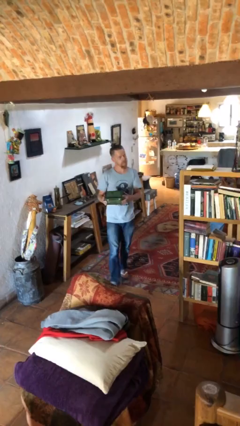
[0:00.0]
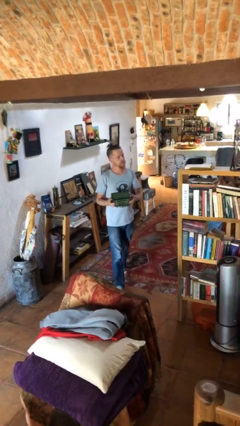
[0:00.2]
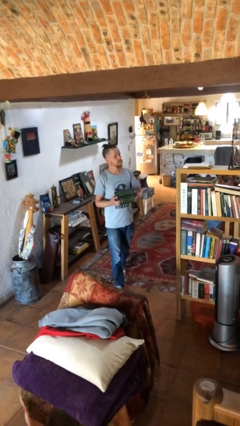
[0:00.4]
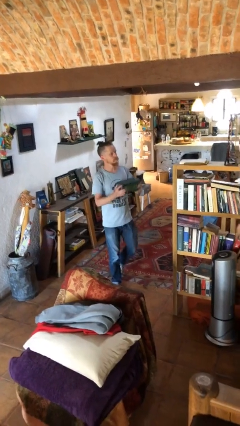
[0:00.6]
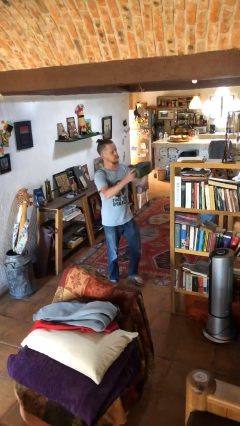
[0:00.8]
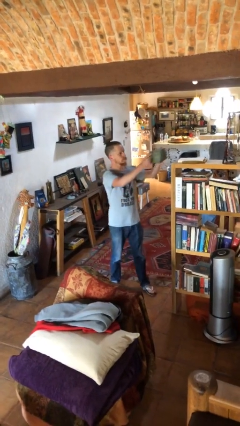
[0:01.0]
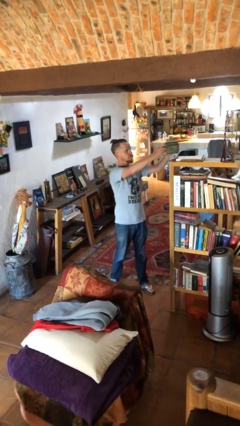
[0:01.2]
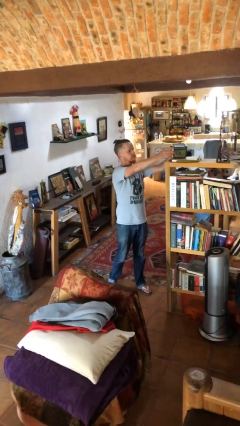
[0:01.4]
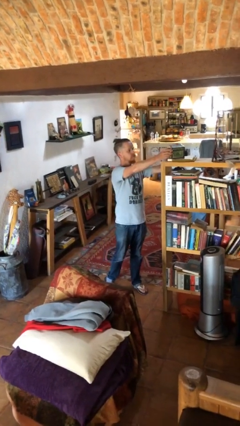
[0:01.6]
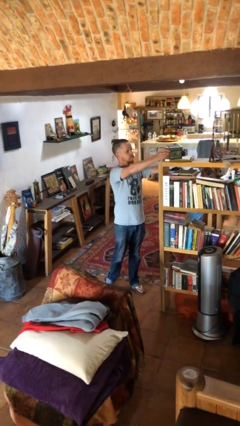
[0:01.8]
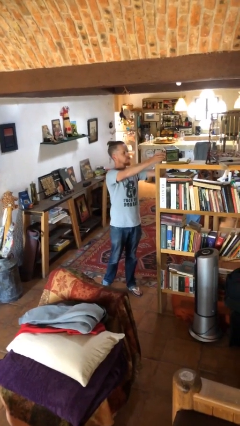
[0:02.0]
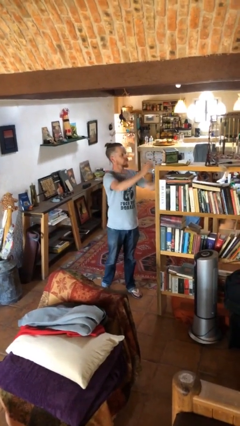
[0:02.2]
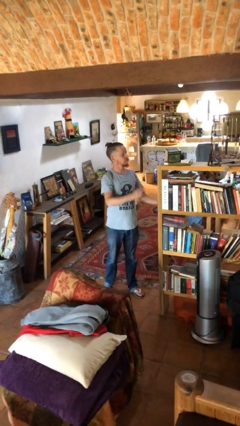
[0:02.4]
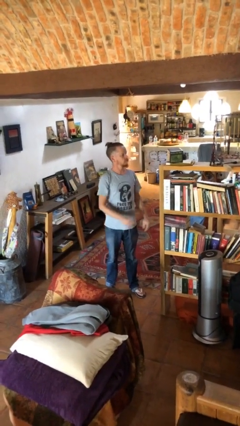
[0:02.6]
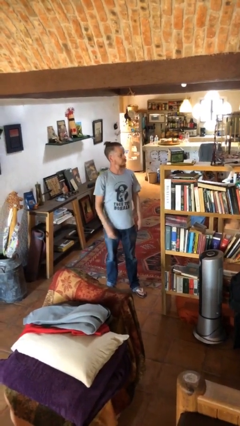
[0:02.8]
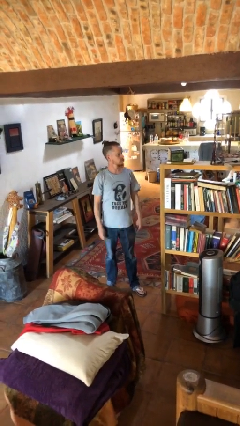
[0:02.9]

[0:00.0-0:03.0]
person puts down object on shelf

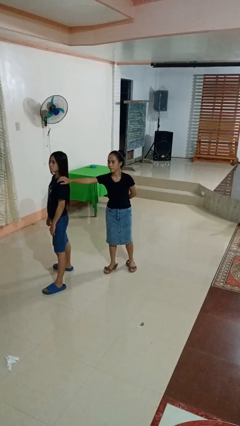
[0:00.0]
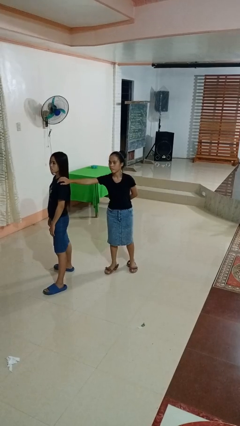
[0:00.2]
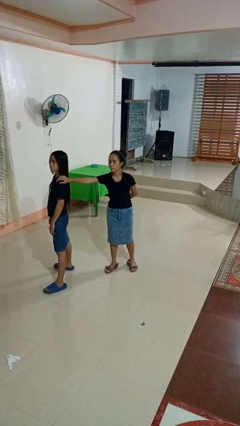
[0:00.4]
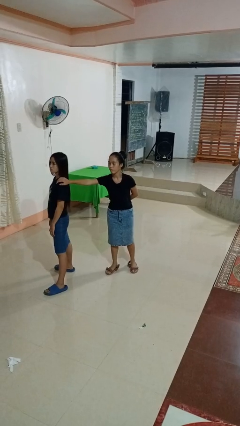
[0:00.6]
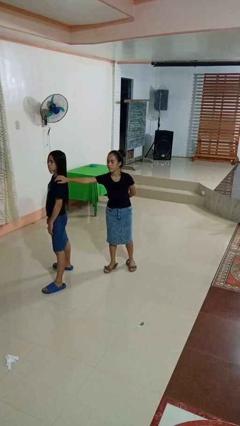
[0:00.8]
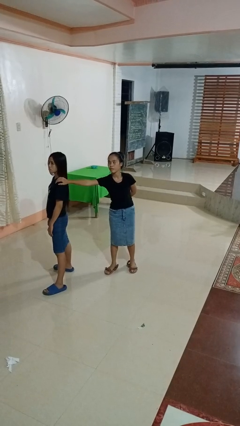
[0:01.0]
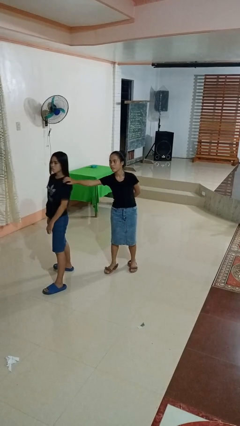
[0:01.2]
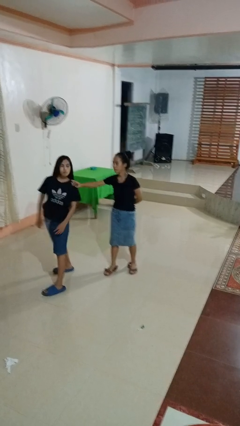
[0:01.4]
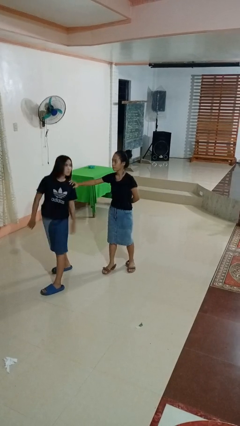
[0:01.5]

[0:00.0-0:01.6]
person grabs person by shoulder

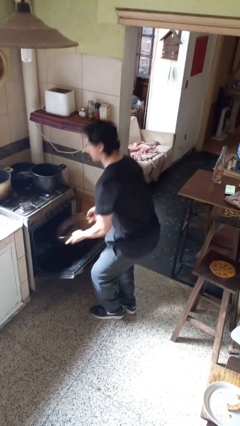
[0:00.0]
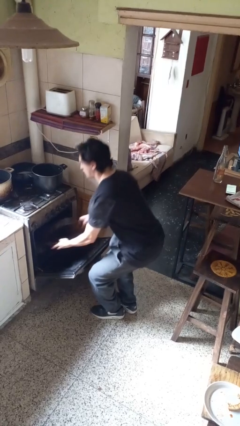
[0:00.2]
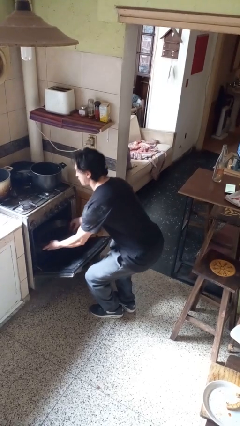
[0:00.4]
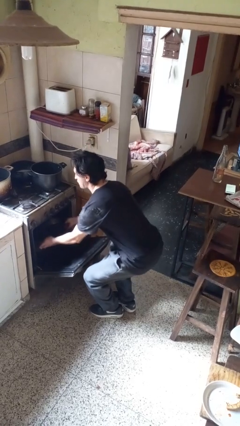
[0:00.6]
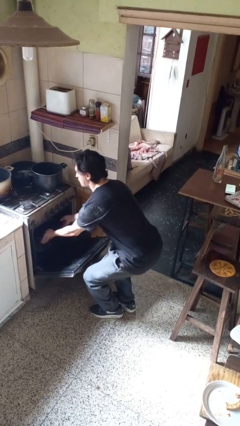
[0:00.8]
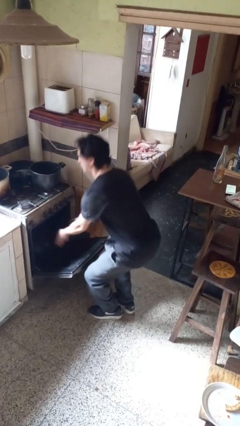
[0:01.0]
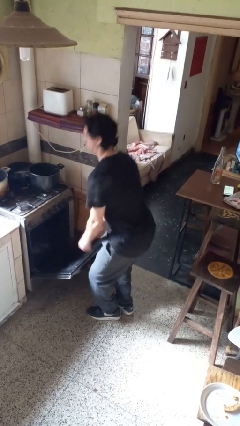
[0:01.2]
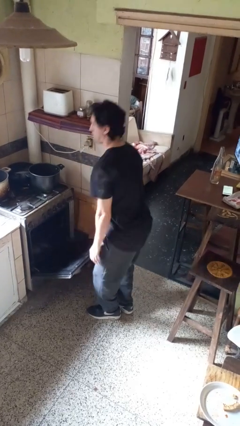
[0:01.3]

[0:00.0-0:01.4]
person puts object into oven

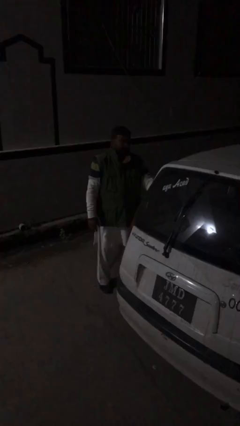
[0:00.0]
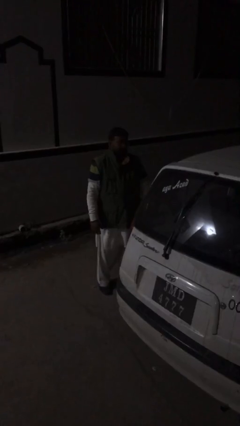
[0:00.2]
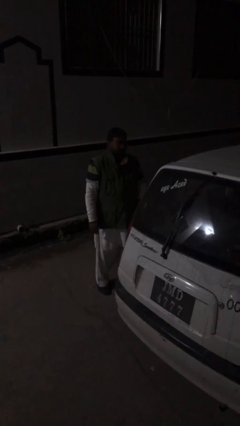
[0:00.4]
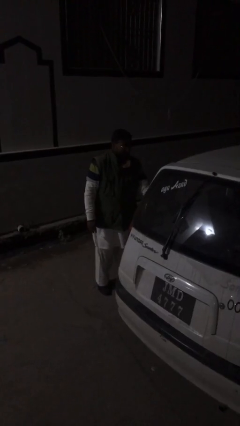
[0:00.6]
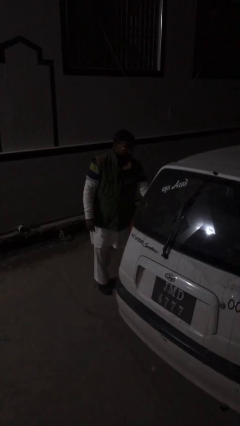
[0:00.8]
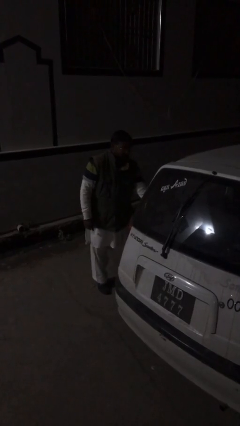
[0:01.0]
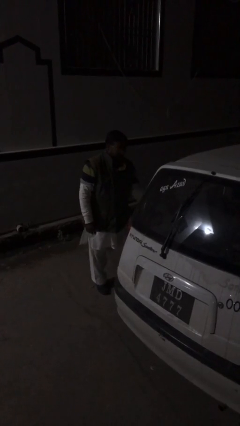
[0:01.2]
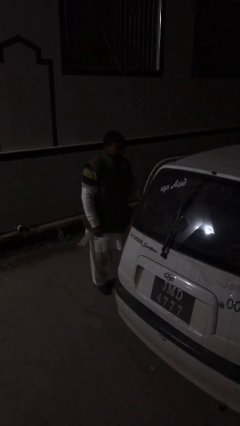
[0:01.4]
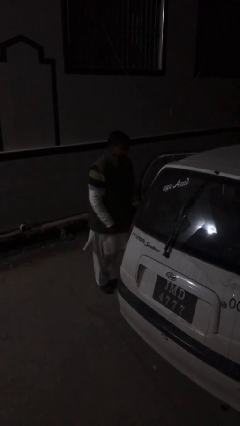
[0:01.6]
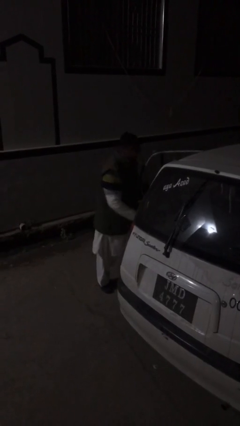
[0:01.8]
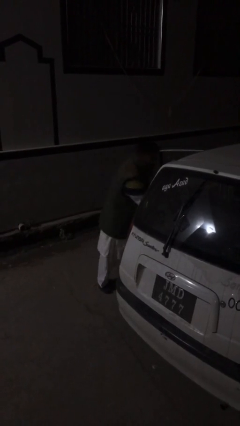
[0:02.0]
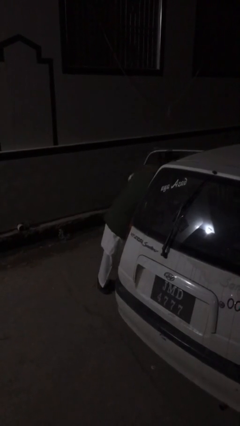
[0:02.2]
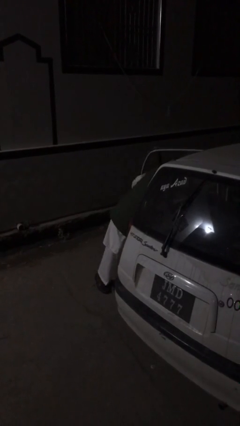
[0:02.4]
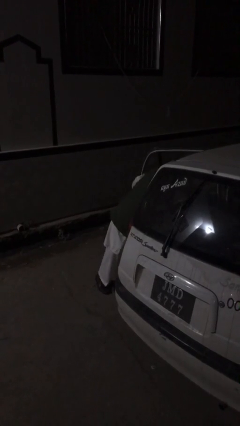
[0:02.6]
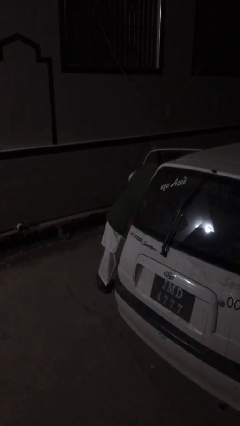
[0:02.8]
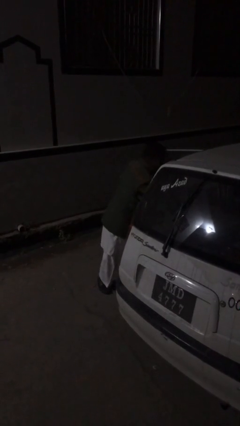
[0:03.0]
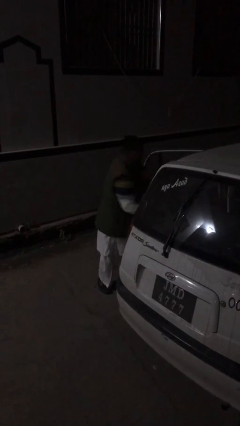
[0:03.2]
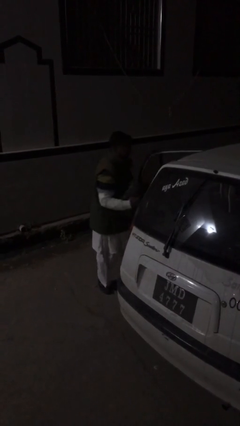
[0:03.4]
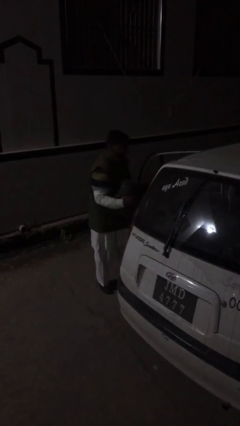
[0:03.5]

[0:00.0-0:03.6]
person unloads car

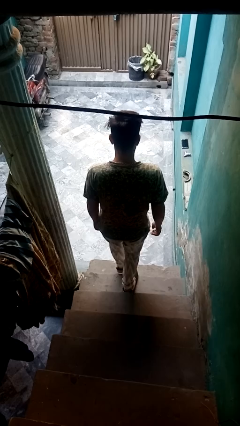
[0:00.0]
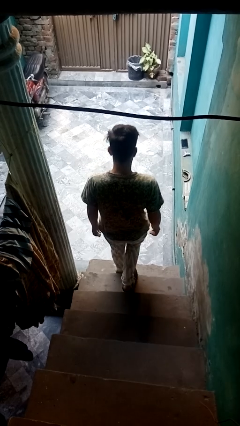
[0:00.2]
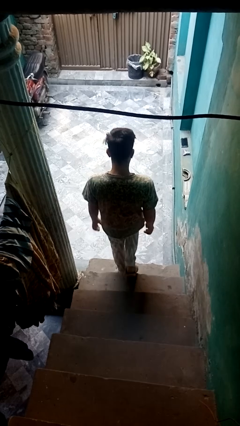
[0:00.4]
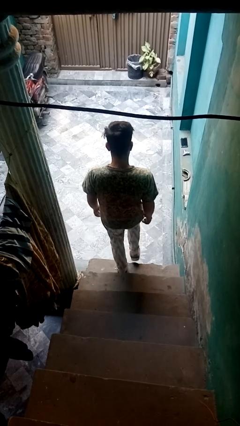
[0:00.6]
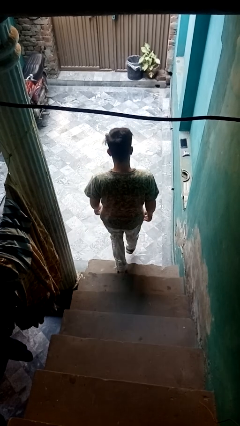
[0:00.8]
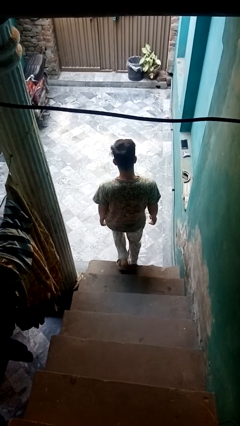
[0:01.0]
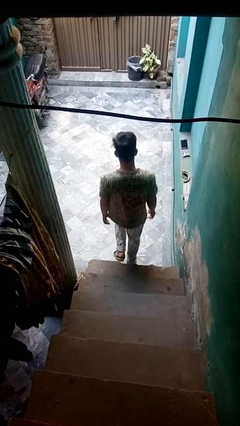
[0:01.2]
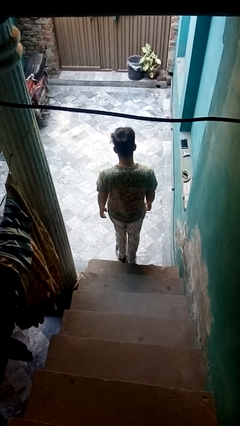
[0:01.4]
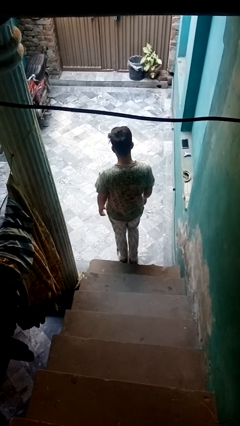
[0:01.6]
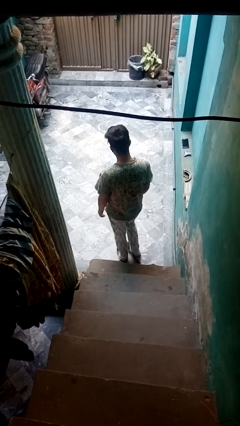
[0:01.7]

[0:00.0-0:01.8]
person climbs down stairs

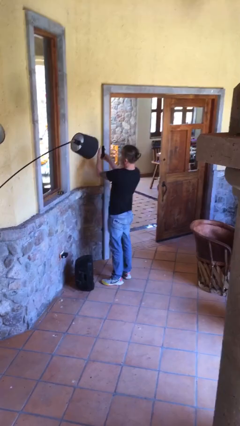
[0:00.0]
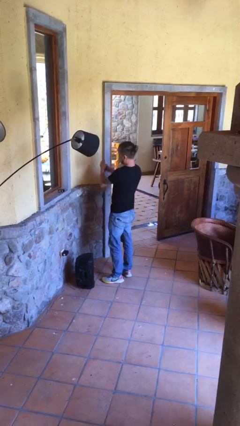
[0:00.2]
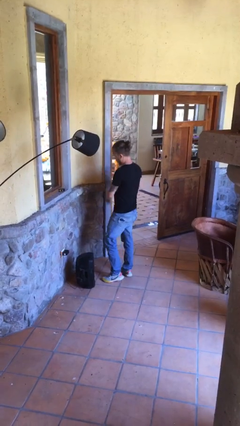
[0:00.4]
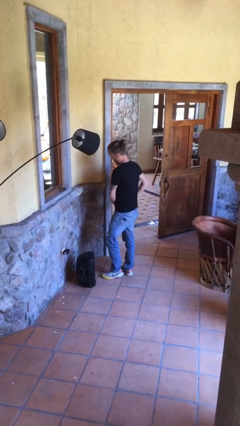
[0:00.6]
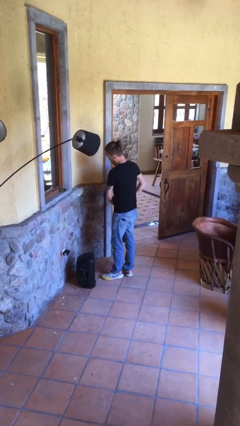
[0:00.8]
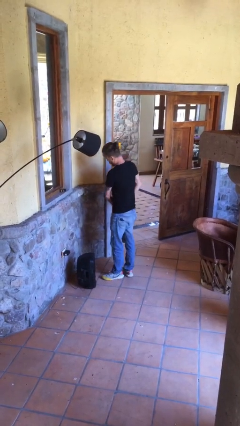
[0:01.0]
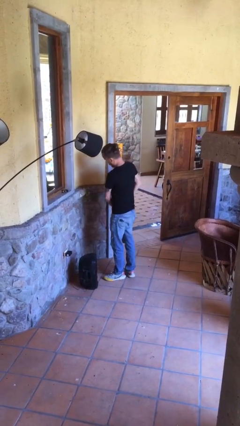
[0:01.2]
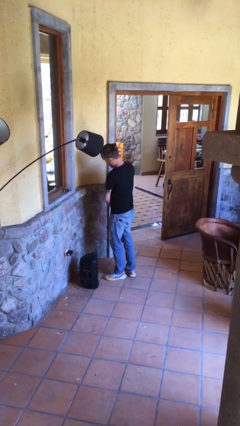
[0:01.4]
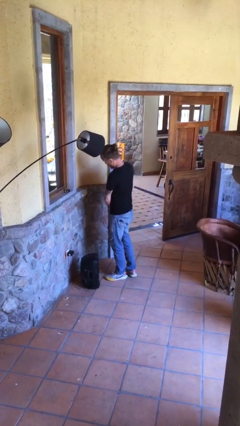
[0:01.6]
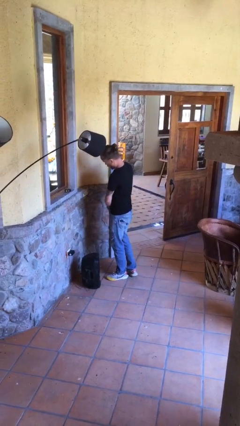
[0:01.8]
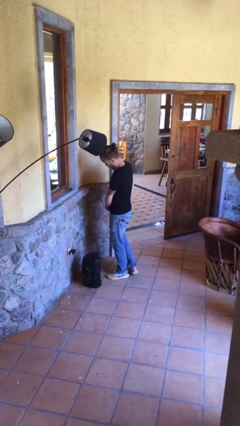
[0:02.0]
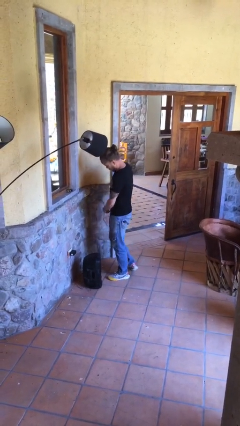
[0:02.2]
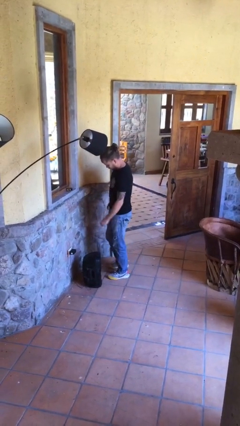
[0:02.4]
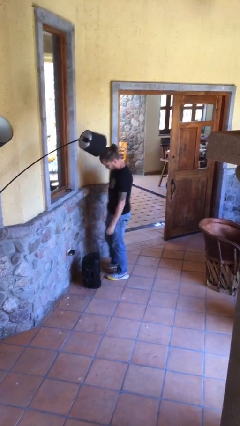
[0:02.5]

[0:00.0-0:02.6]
person puts phone into pocket

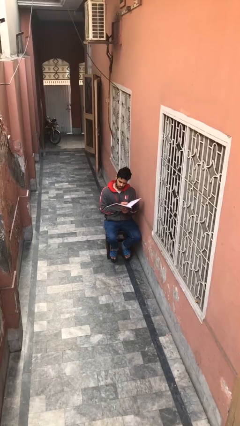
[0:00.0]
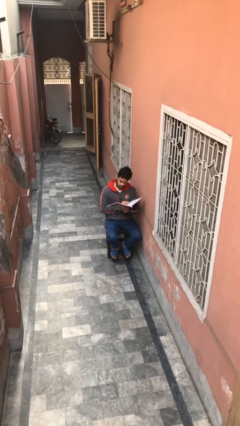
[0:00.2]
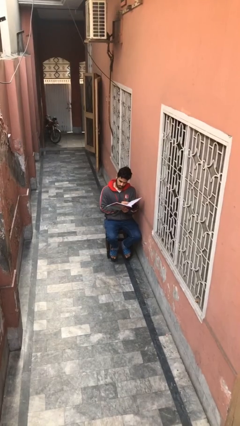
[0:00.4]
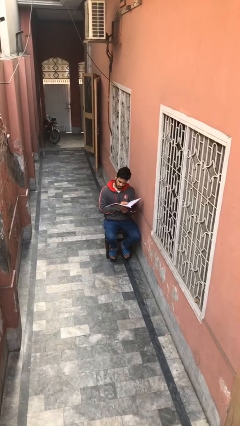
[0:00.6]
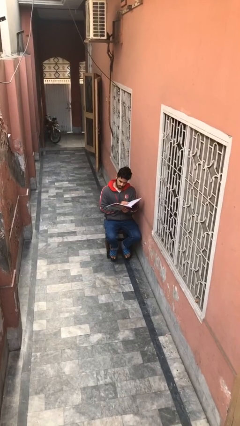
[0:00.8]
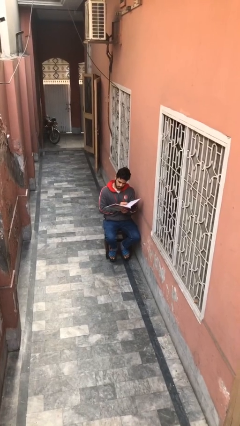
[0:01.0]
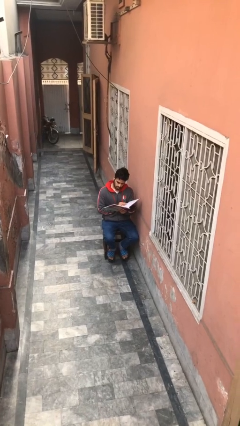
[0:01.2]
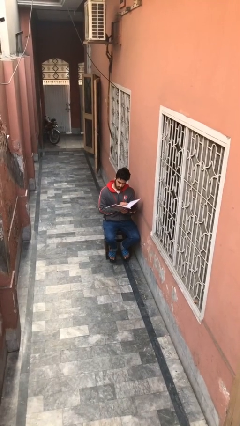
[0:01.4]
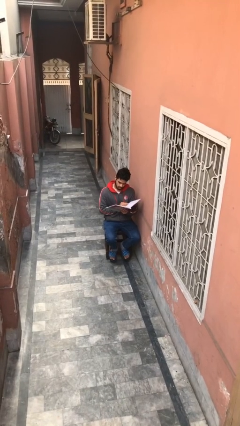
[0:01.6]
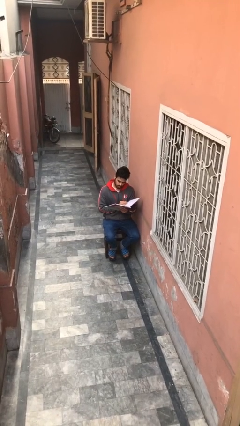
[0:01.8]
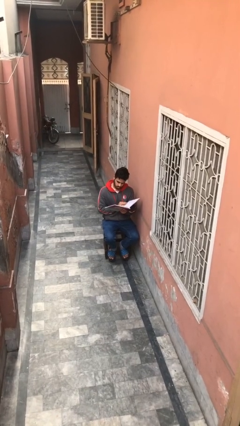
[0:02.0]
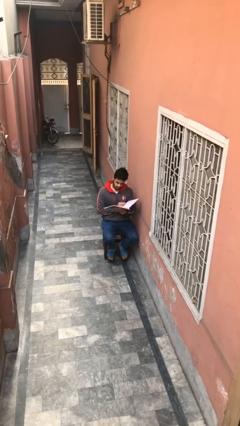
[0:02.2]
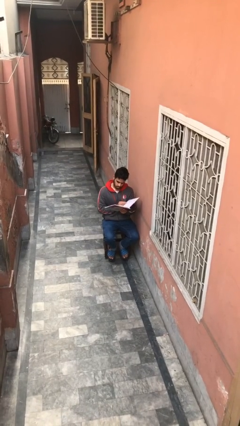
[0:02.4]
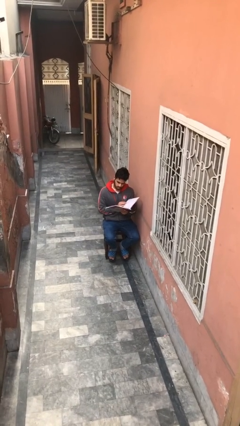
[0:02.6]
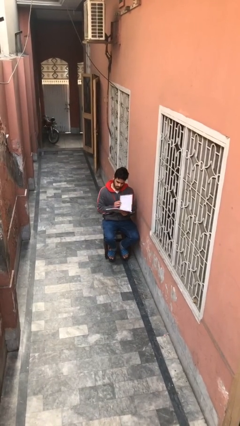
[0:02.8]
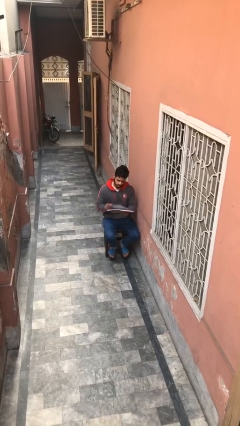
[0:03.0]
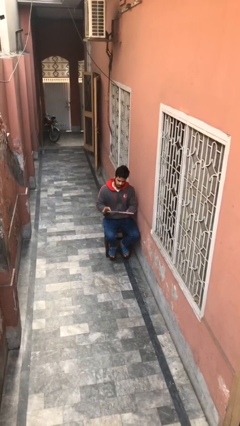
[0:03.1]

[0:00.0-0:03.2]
person reads document
